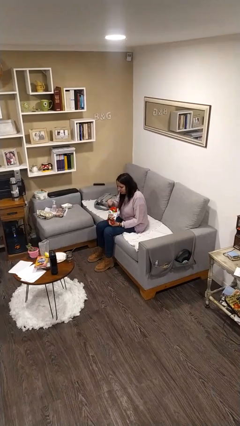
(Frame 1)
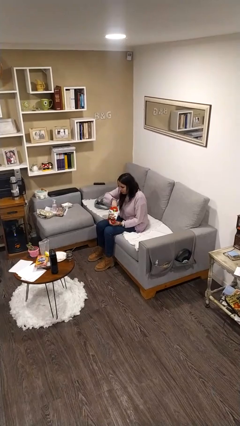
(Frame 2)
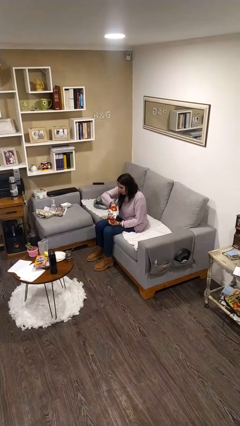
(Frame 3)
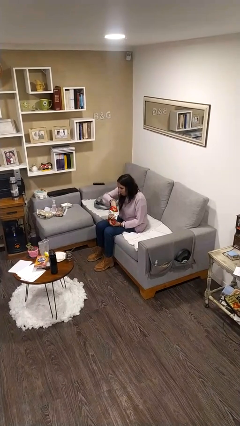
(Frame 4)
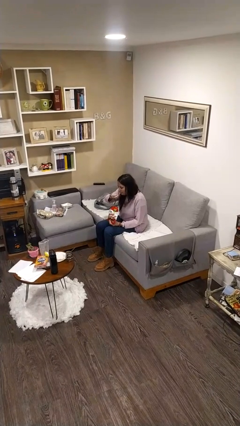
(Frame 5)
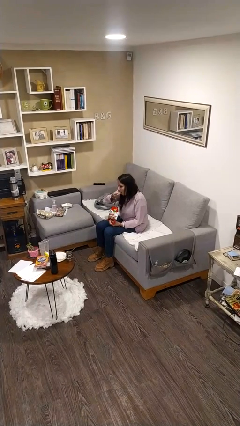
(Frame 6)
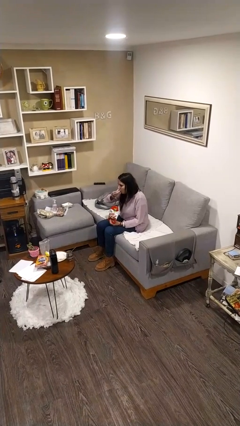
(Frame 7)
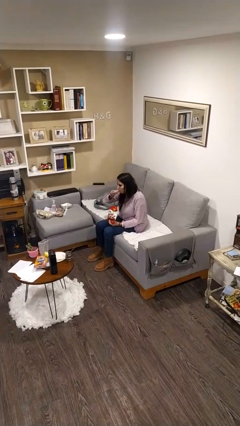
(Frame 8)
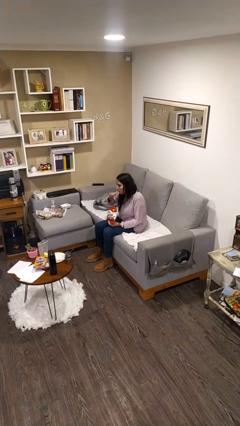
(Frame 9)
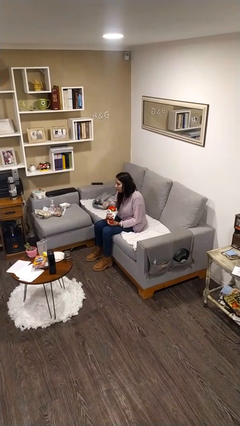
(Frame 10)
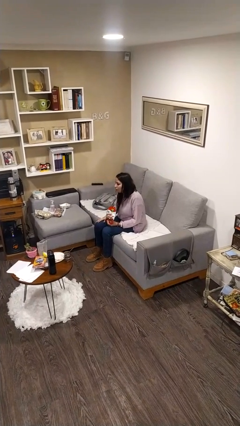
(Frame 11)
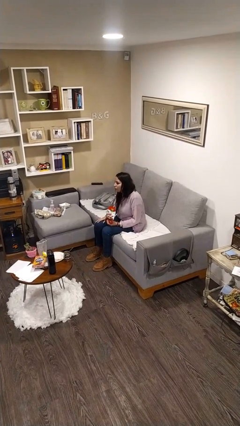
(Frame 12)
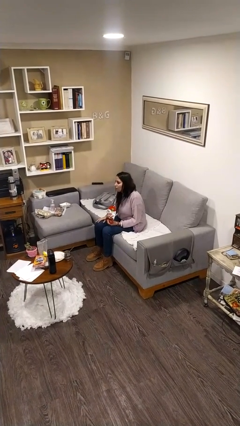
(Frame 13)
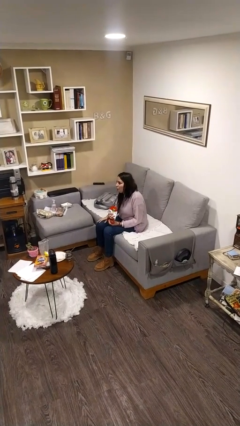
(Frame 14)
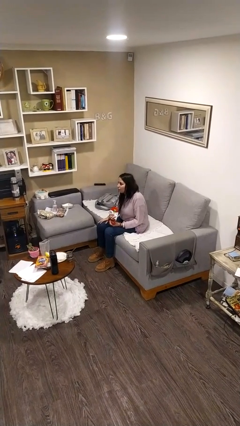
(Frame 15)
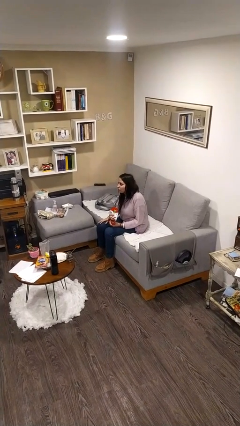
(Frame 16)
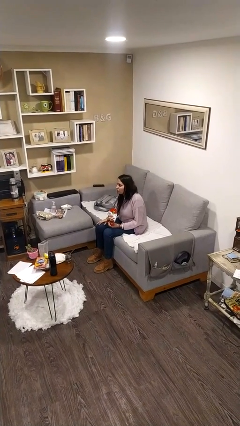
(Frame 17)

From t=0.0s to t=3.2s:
person eats snack from bag

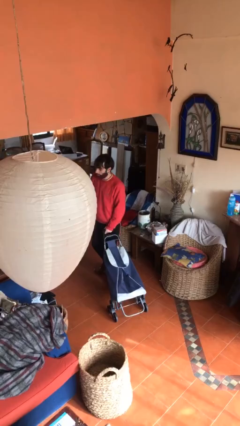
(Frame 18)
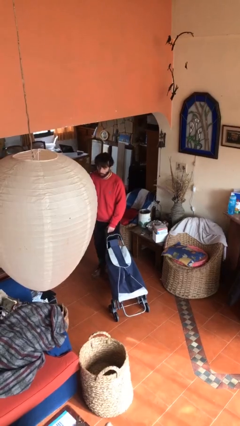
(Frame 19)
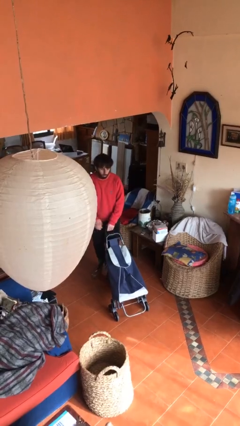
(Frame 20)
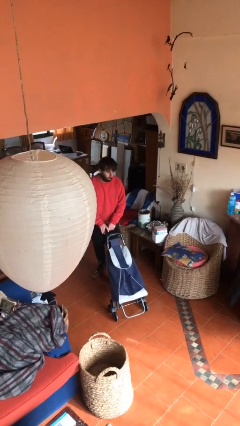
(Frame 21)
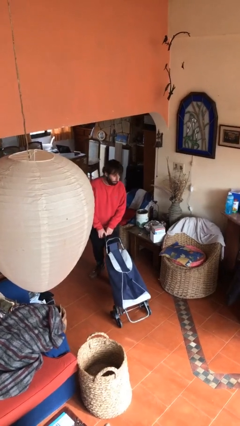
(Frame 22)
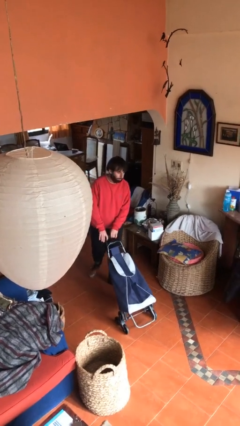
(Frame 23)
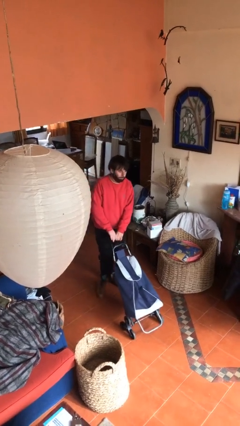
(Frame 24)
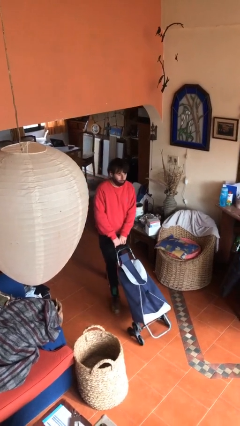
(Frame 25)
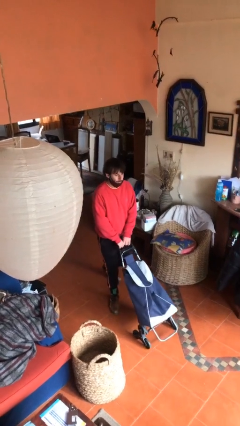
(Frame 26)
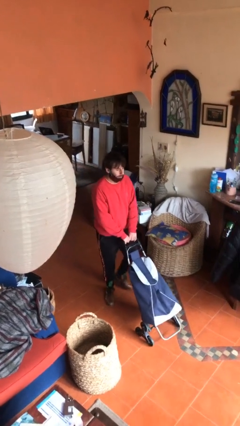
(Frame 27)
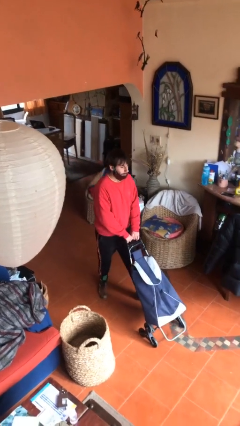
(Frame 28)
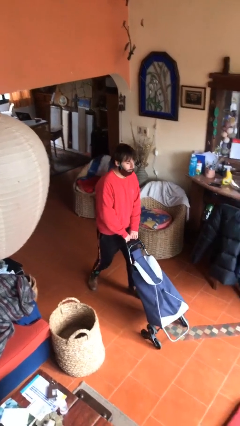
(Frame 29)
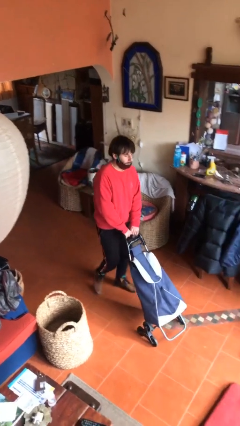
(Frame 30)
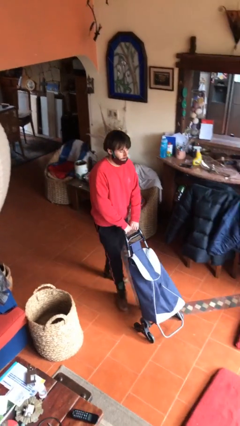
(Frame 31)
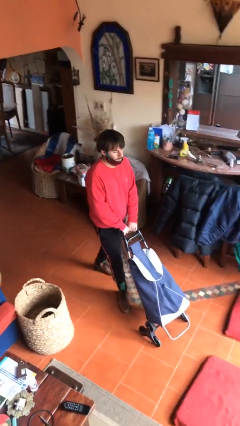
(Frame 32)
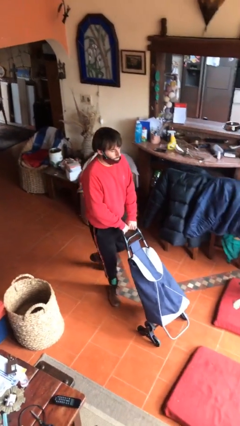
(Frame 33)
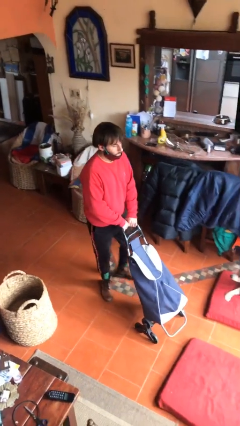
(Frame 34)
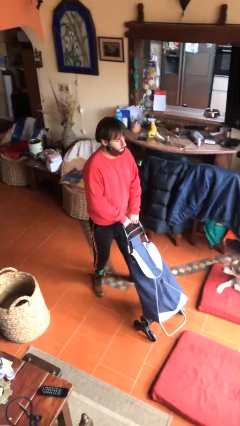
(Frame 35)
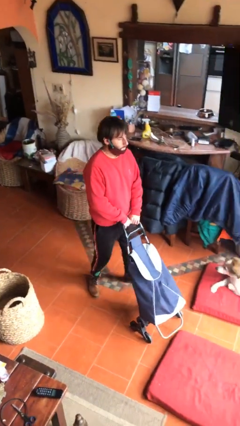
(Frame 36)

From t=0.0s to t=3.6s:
person pushes wheeled cart

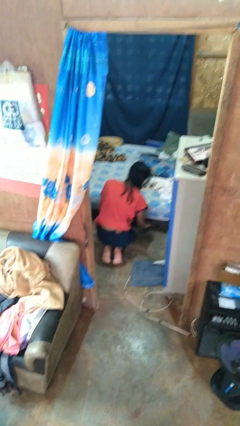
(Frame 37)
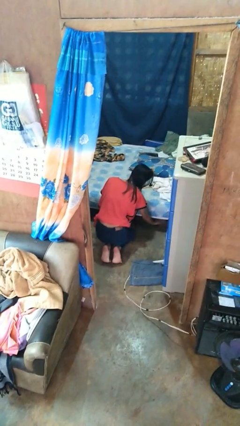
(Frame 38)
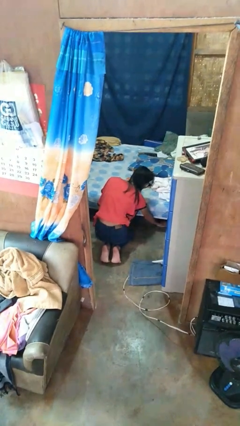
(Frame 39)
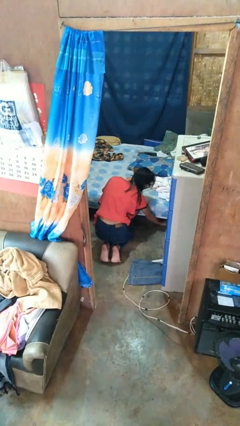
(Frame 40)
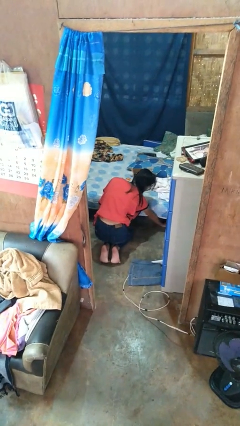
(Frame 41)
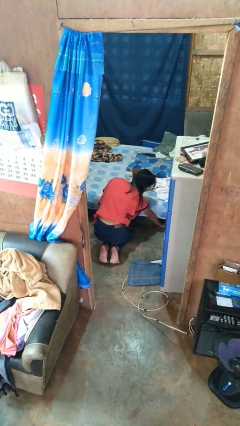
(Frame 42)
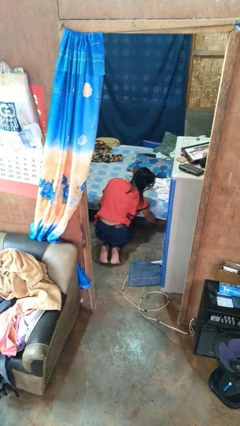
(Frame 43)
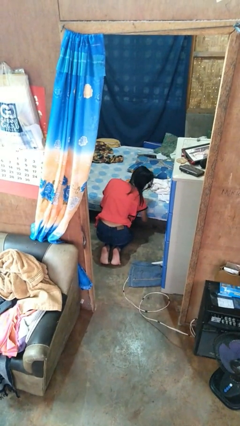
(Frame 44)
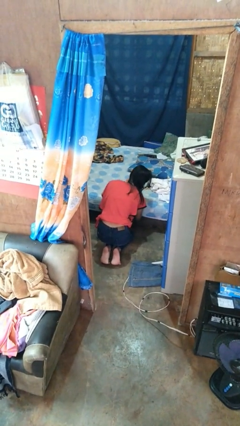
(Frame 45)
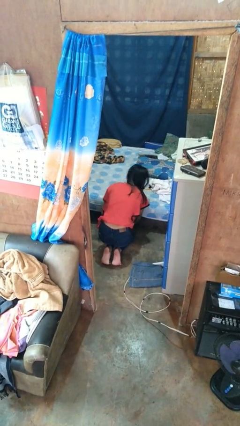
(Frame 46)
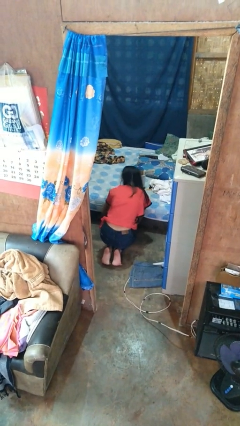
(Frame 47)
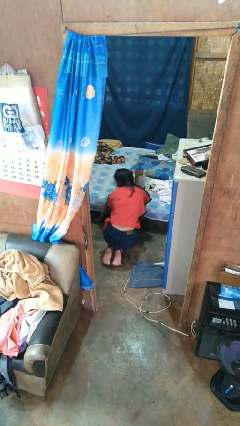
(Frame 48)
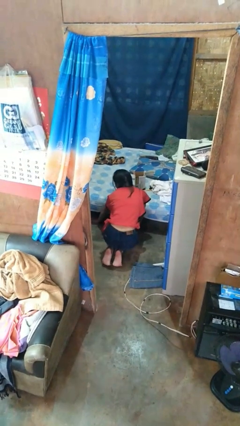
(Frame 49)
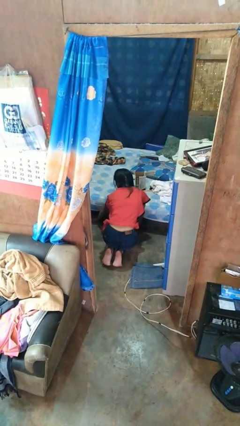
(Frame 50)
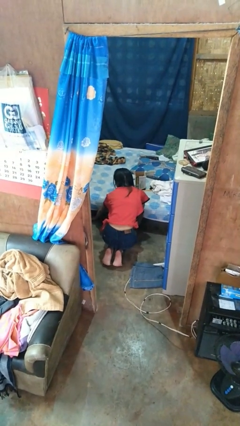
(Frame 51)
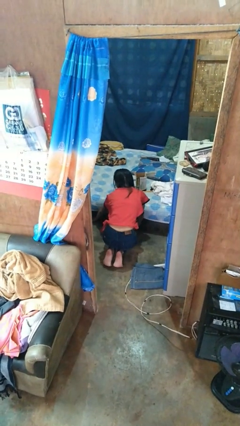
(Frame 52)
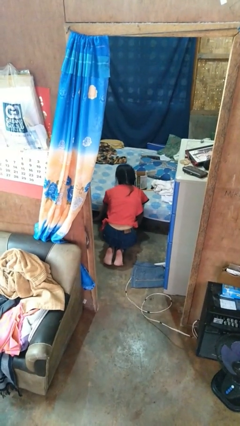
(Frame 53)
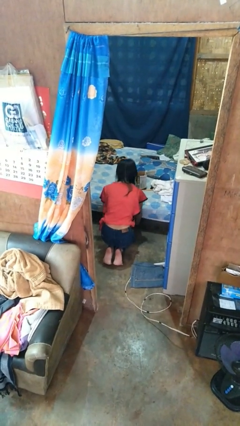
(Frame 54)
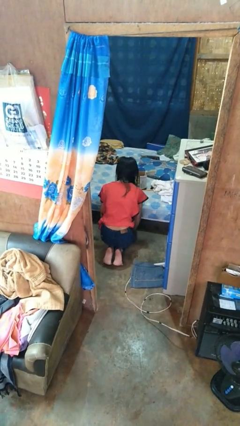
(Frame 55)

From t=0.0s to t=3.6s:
person searches under bed

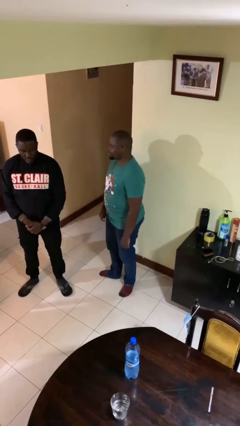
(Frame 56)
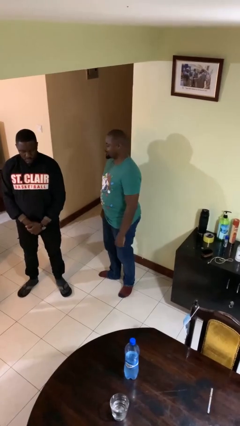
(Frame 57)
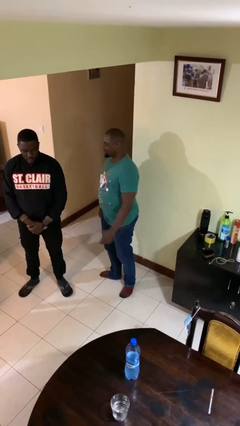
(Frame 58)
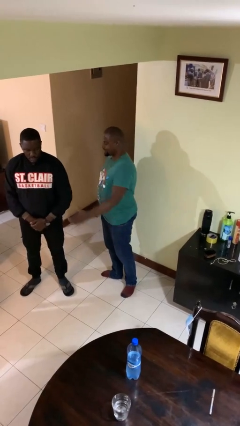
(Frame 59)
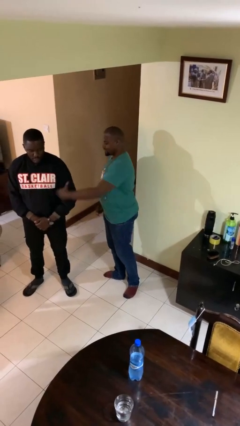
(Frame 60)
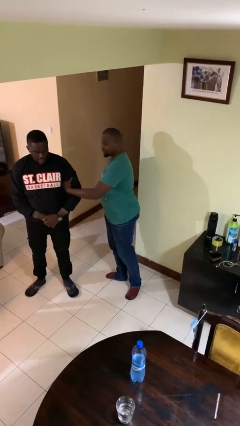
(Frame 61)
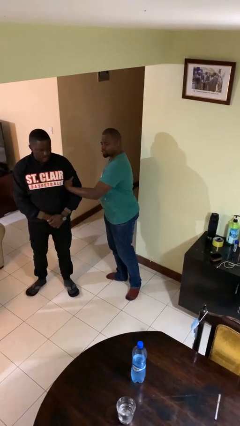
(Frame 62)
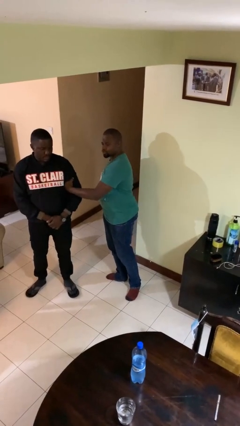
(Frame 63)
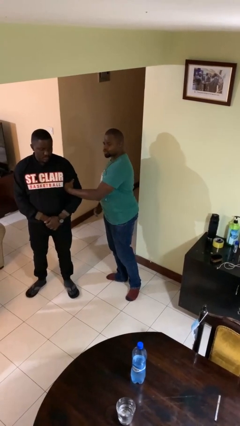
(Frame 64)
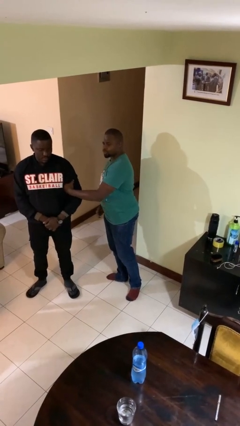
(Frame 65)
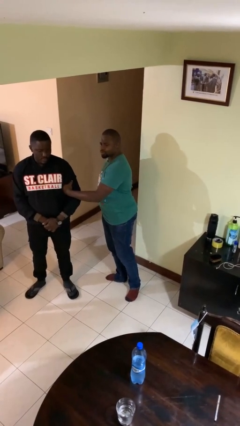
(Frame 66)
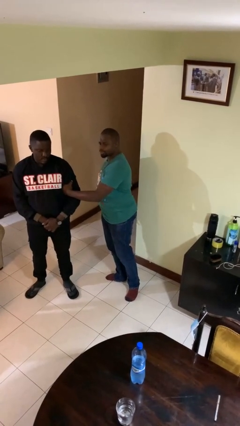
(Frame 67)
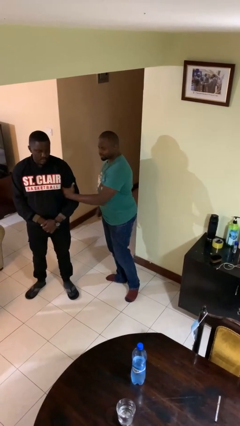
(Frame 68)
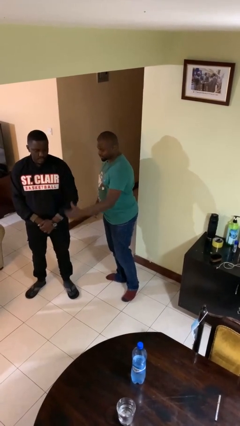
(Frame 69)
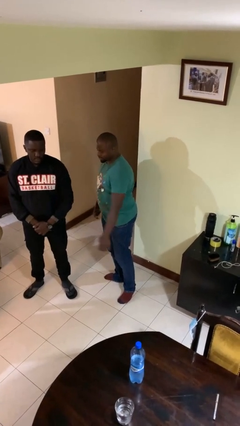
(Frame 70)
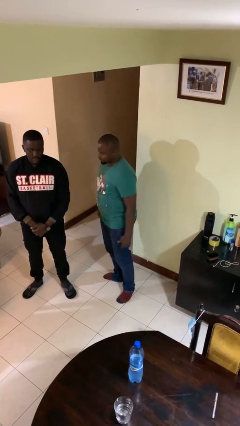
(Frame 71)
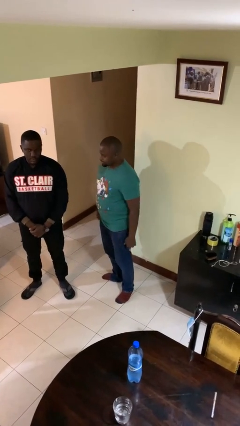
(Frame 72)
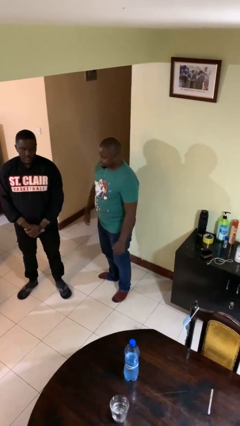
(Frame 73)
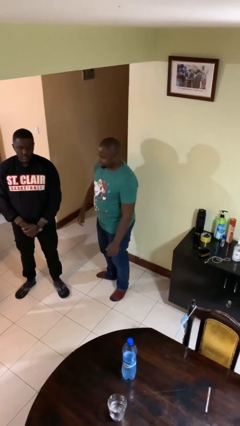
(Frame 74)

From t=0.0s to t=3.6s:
person grabs person by bicep

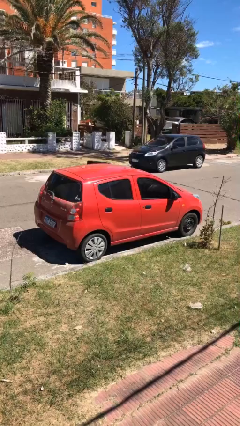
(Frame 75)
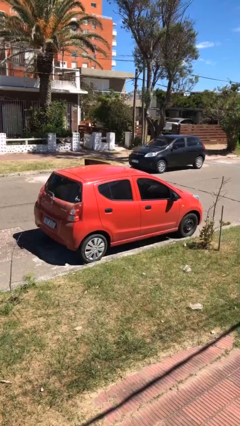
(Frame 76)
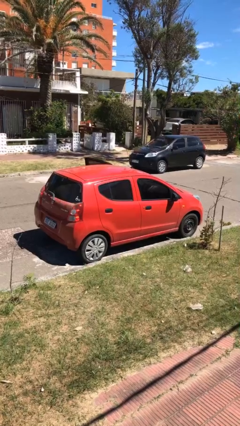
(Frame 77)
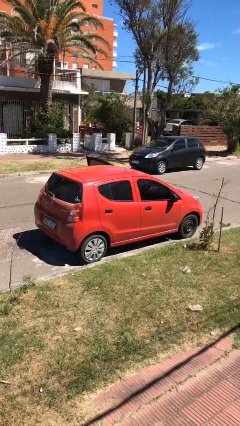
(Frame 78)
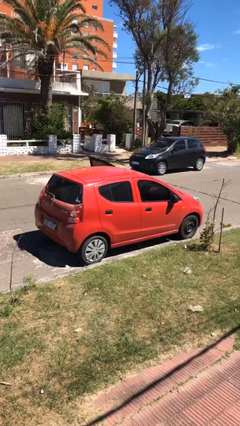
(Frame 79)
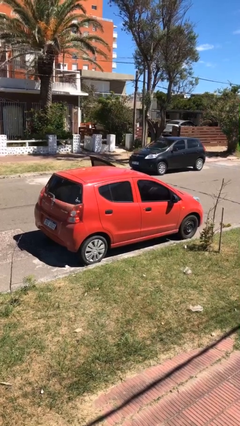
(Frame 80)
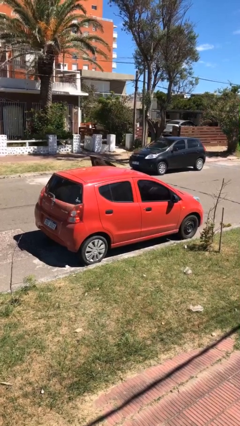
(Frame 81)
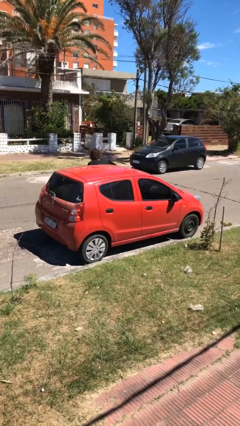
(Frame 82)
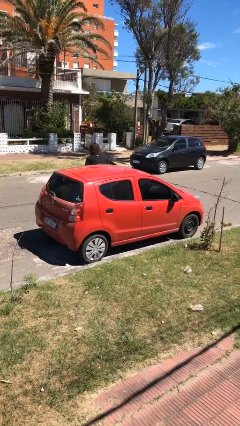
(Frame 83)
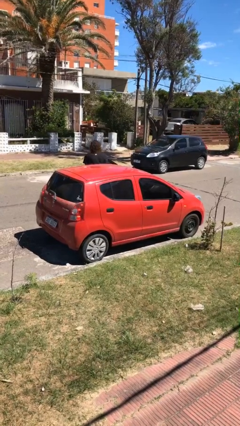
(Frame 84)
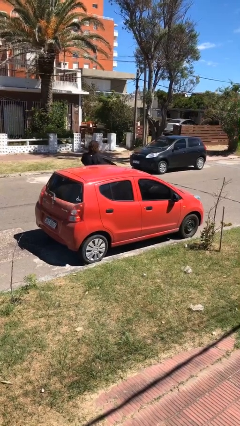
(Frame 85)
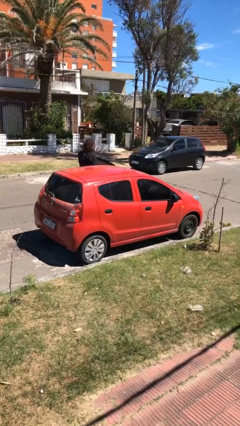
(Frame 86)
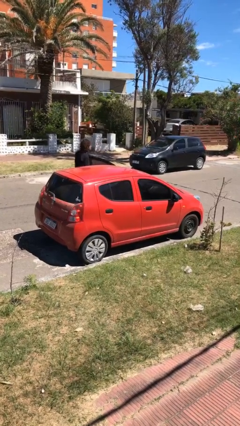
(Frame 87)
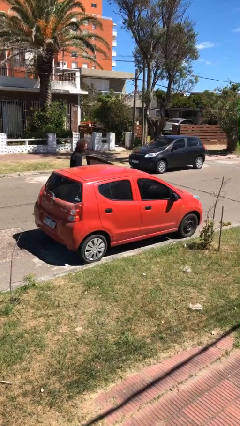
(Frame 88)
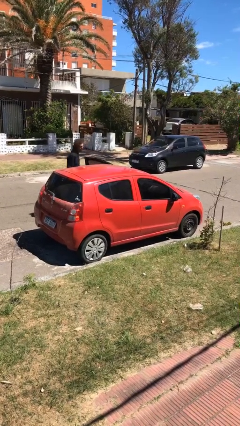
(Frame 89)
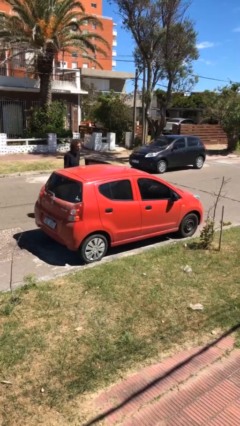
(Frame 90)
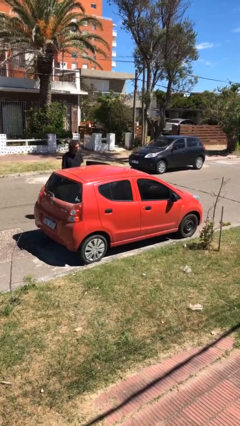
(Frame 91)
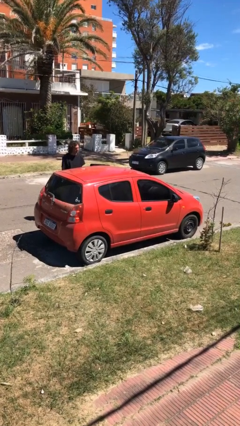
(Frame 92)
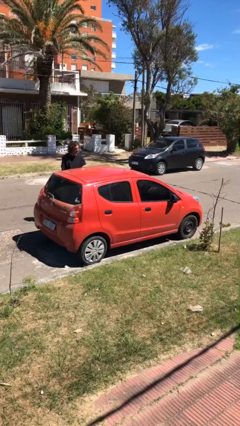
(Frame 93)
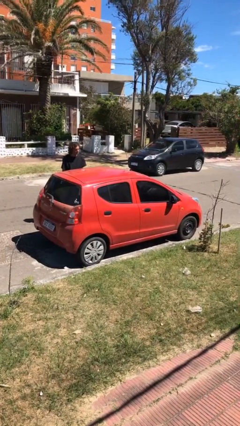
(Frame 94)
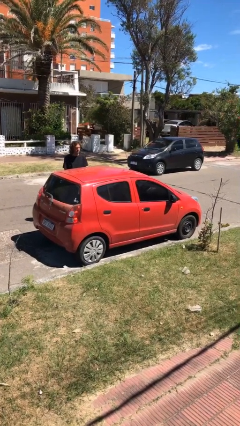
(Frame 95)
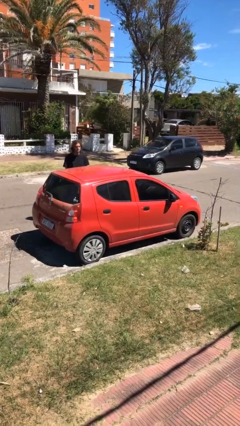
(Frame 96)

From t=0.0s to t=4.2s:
car drops off person
